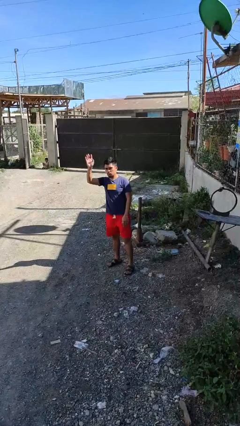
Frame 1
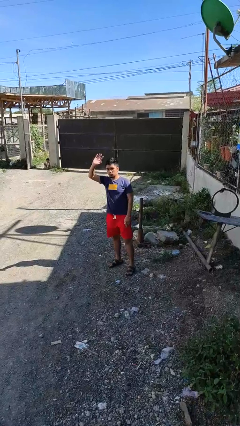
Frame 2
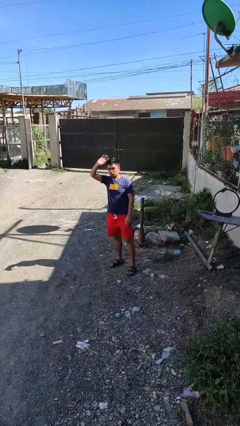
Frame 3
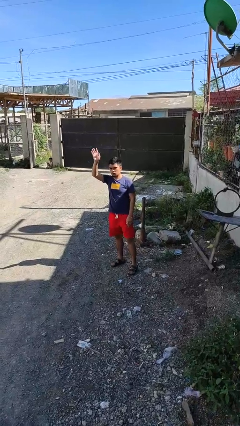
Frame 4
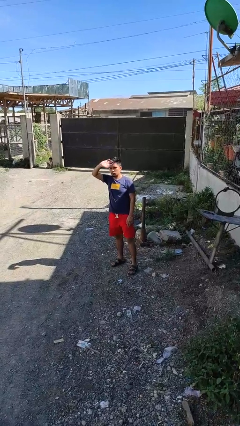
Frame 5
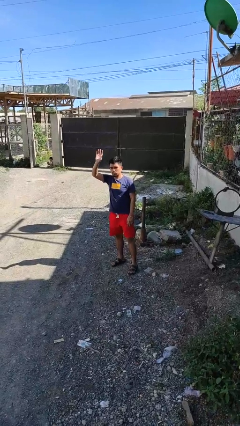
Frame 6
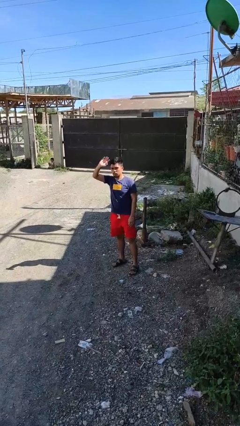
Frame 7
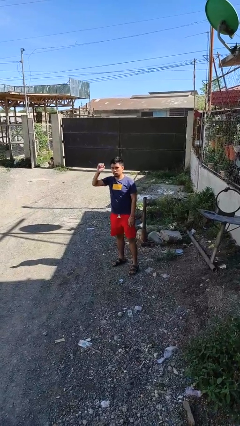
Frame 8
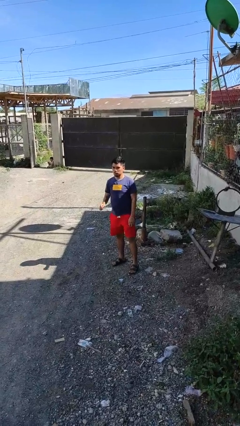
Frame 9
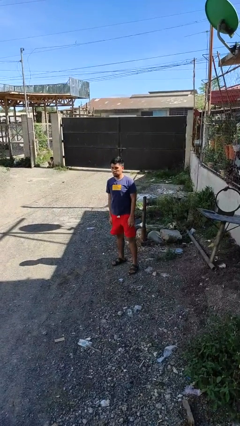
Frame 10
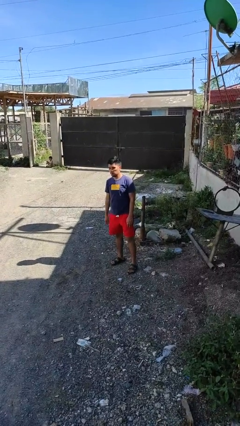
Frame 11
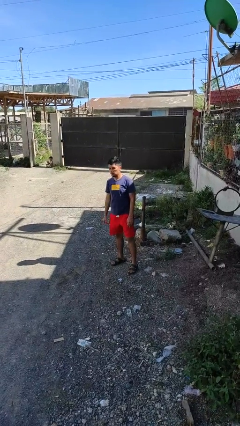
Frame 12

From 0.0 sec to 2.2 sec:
person waves at person

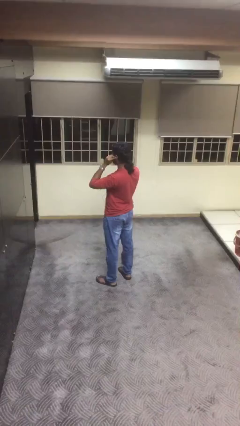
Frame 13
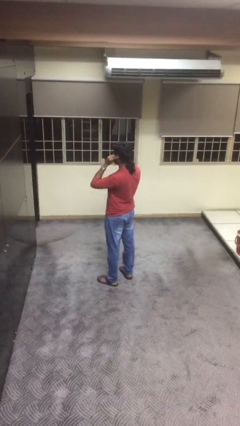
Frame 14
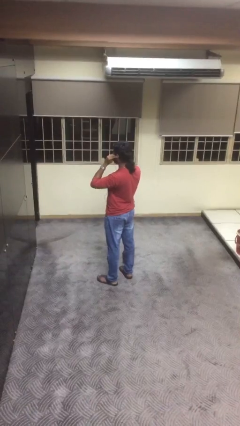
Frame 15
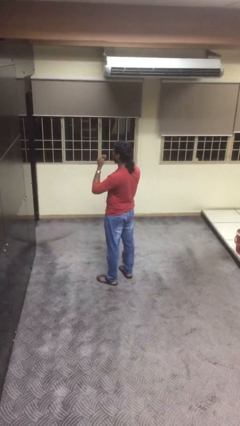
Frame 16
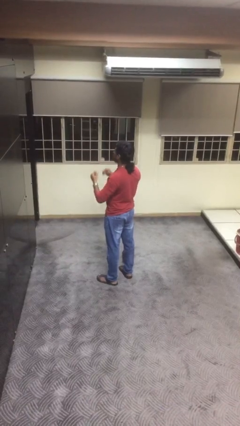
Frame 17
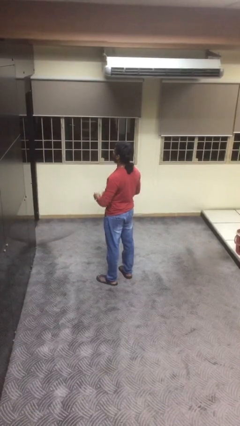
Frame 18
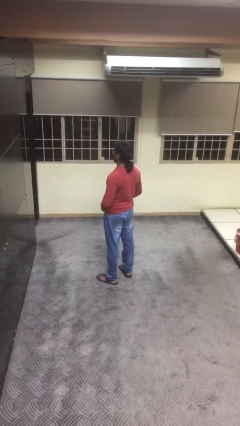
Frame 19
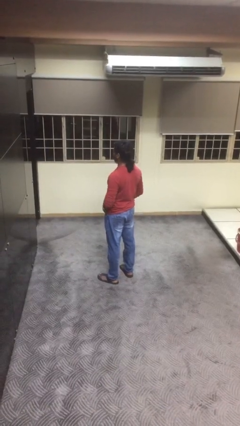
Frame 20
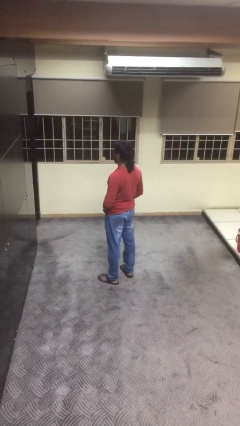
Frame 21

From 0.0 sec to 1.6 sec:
person takes off headphones

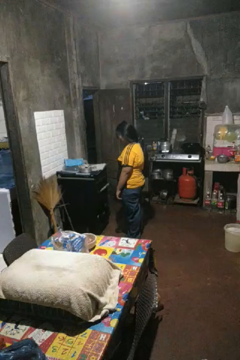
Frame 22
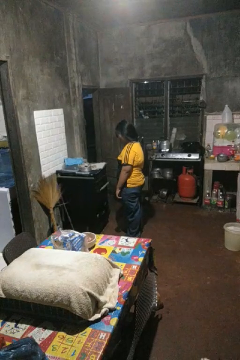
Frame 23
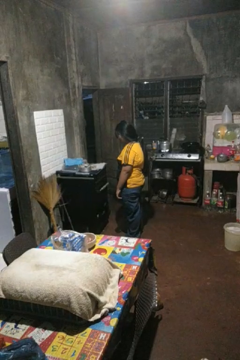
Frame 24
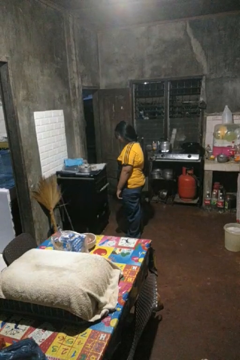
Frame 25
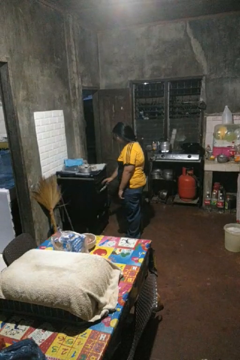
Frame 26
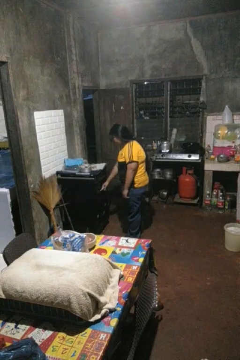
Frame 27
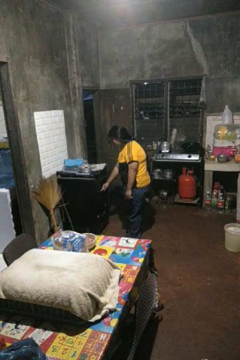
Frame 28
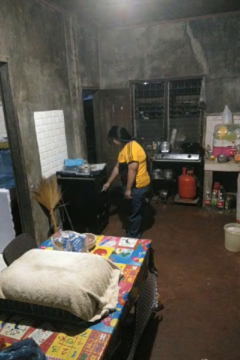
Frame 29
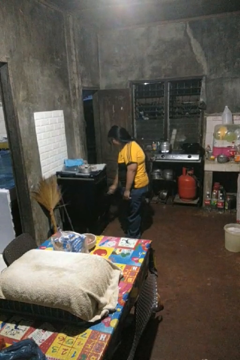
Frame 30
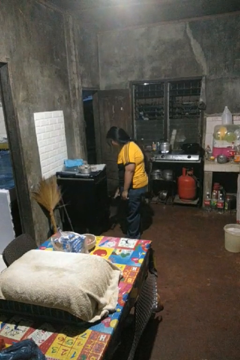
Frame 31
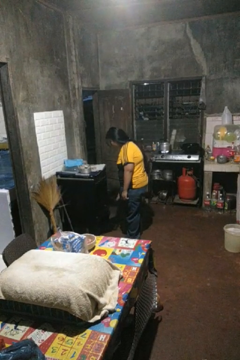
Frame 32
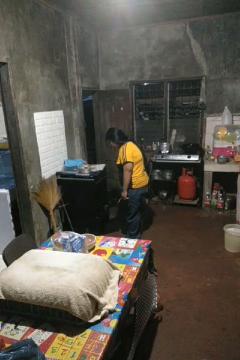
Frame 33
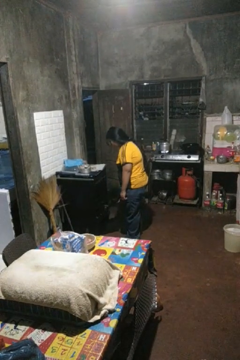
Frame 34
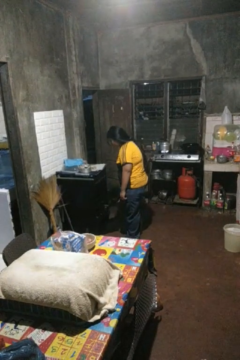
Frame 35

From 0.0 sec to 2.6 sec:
person opens oven door

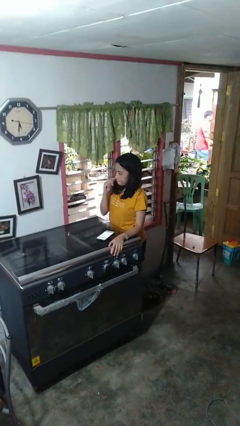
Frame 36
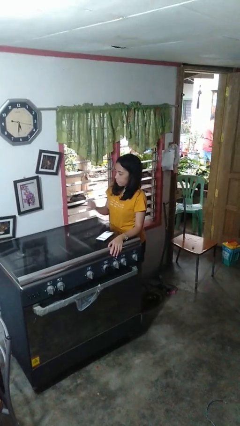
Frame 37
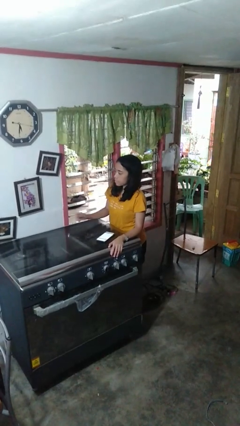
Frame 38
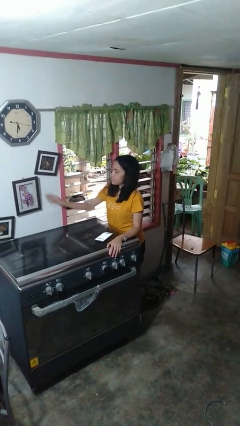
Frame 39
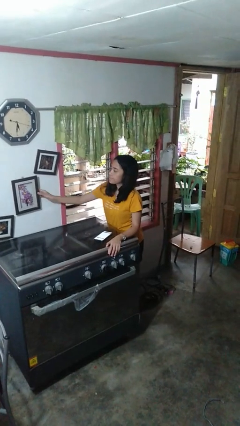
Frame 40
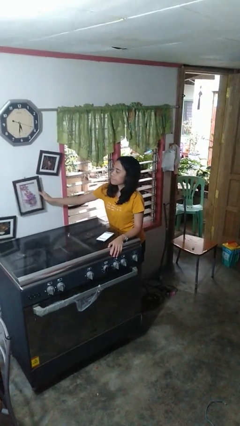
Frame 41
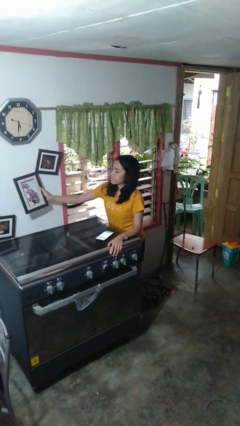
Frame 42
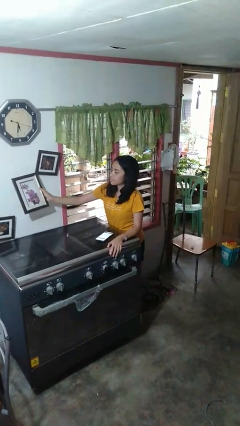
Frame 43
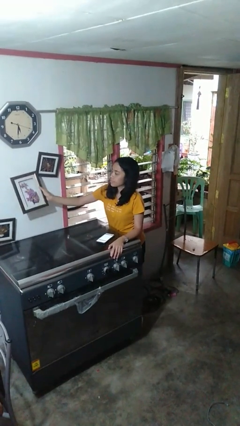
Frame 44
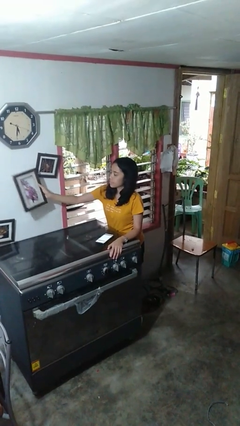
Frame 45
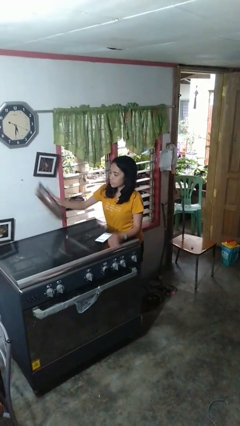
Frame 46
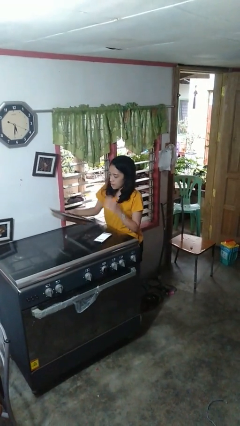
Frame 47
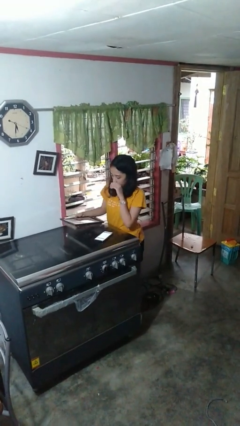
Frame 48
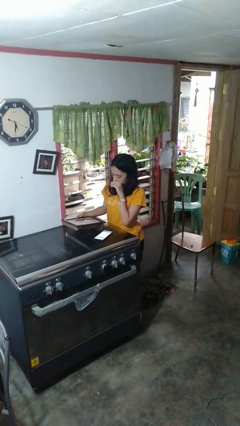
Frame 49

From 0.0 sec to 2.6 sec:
person takes down picture frame

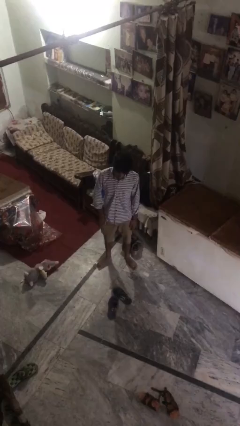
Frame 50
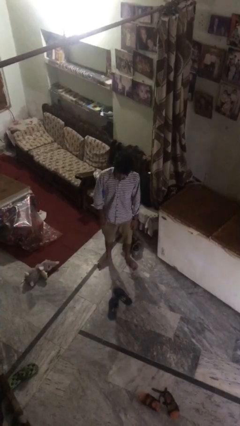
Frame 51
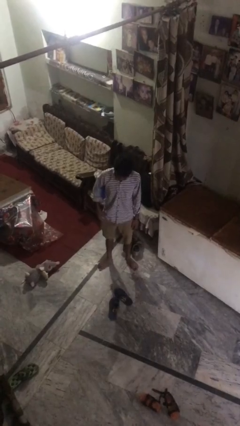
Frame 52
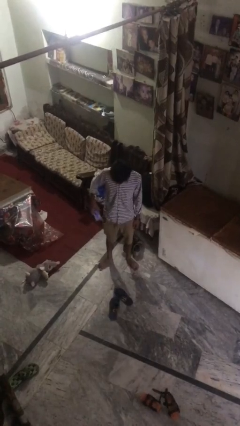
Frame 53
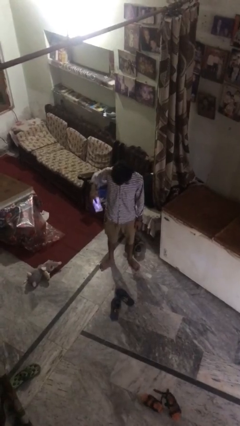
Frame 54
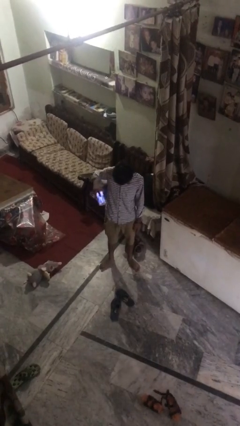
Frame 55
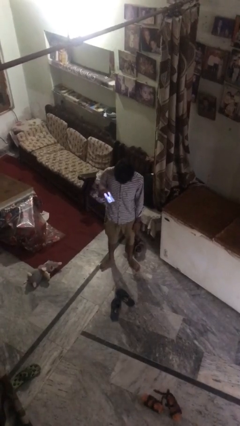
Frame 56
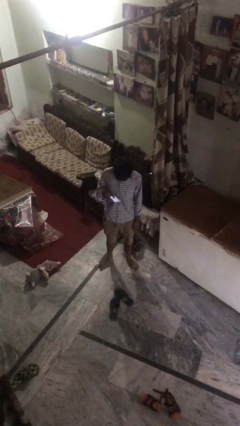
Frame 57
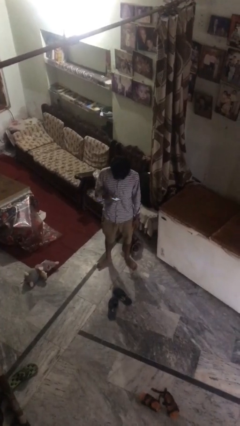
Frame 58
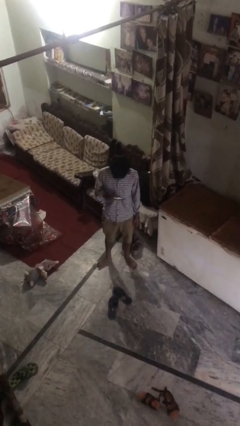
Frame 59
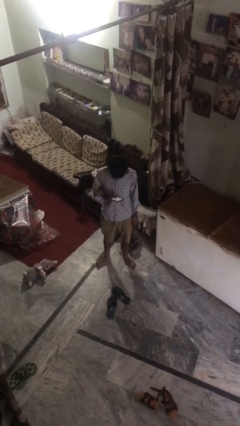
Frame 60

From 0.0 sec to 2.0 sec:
person takes phone from pocket

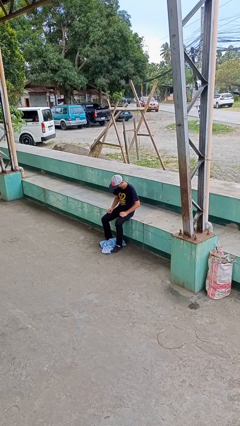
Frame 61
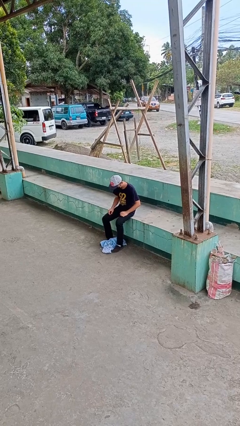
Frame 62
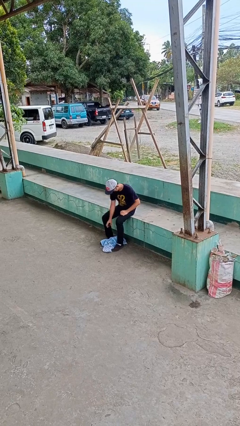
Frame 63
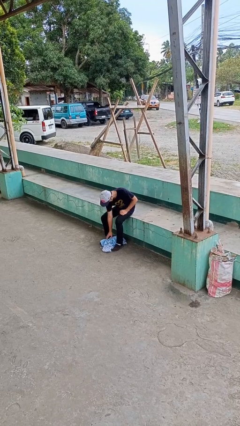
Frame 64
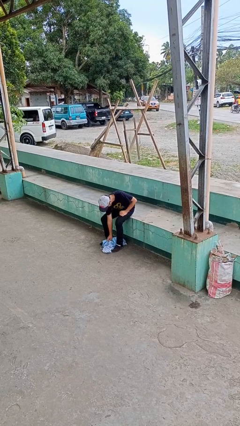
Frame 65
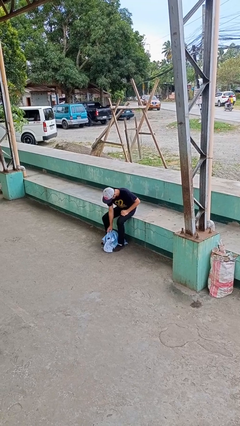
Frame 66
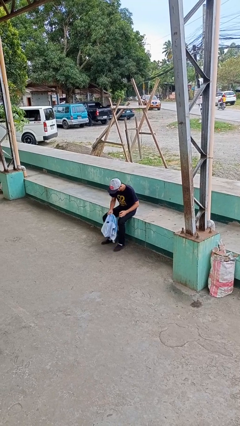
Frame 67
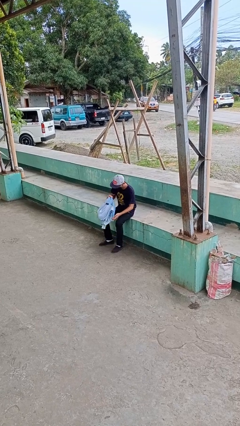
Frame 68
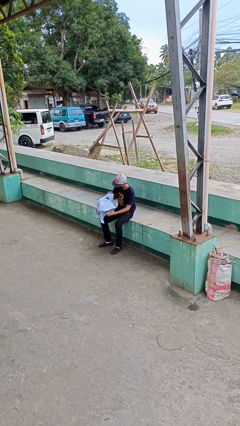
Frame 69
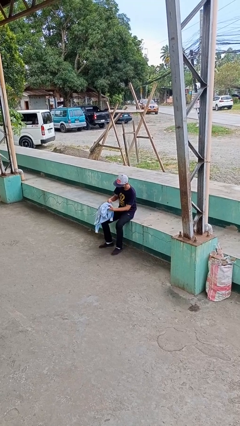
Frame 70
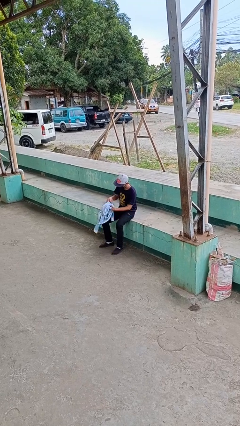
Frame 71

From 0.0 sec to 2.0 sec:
person picks up object from floor

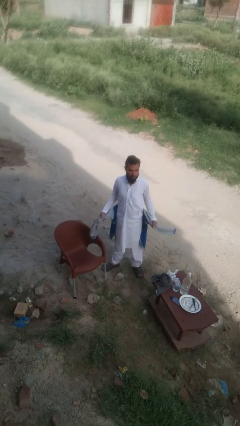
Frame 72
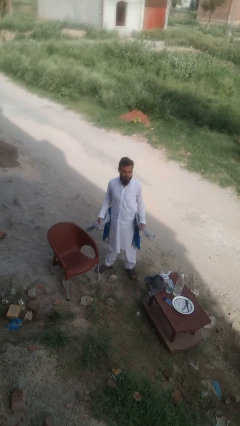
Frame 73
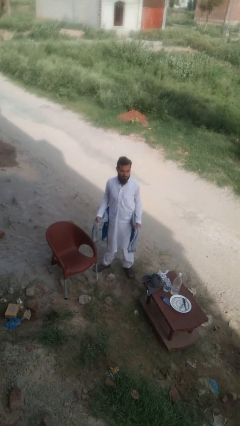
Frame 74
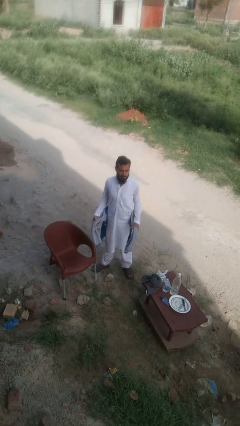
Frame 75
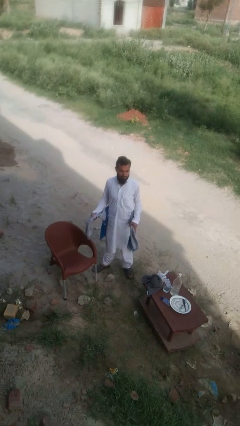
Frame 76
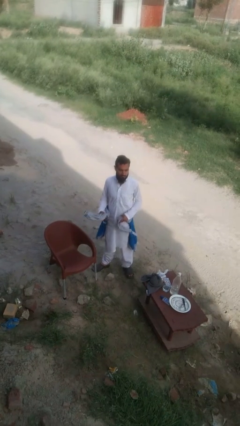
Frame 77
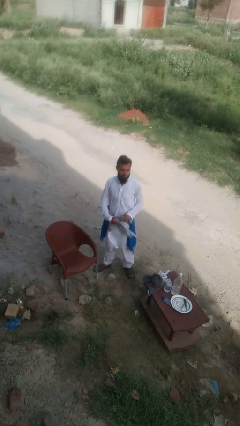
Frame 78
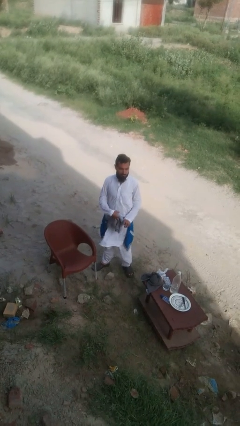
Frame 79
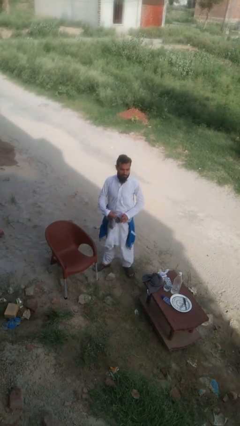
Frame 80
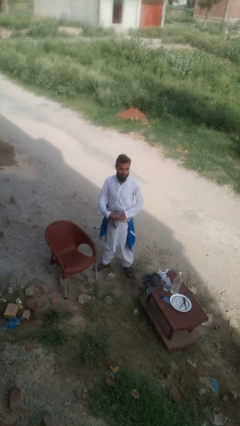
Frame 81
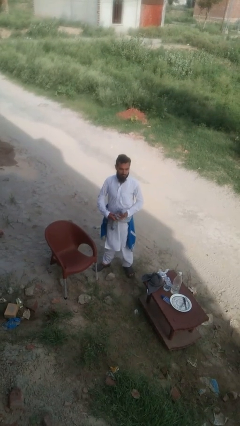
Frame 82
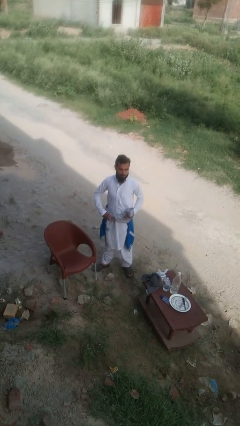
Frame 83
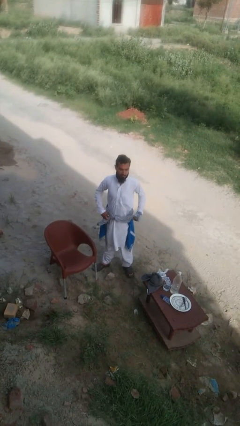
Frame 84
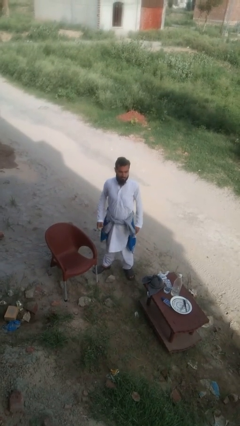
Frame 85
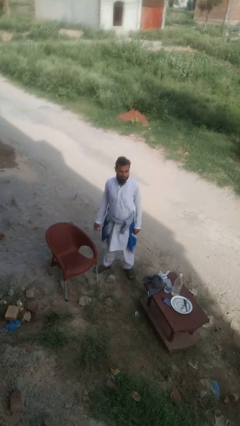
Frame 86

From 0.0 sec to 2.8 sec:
person ties jacket around waist

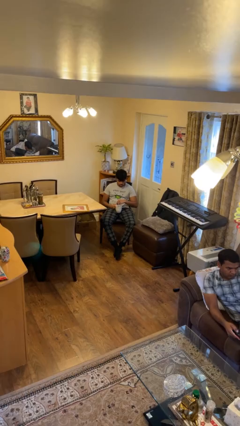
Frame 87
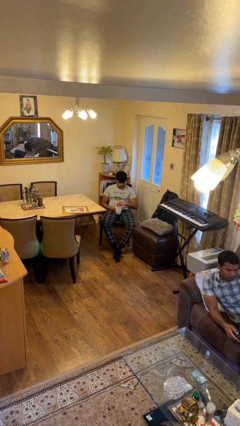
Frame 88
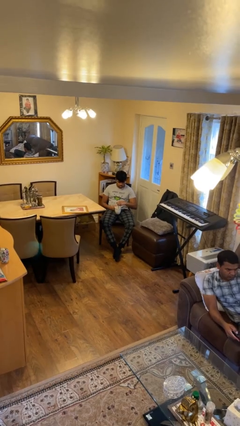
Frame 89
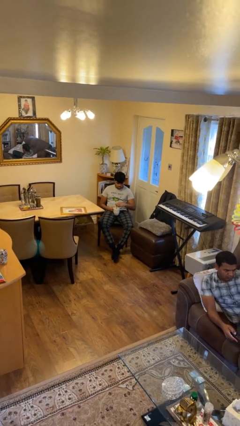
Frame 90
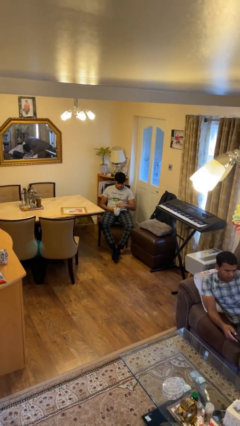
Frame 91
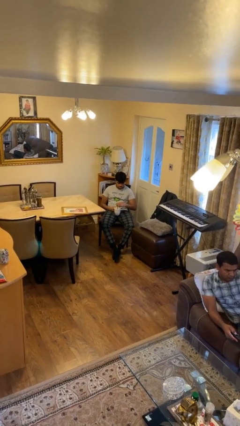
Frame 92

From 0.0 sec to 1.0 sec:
person stirs mug

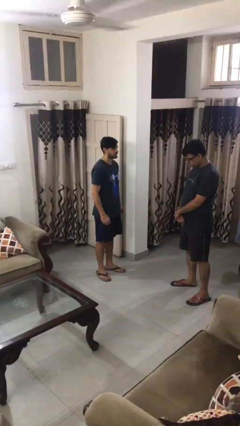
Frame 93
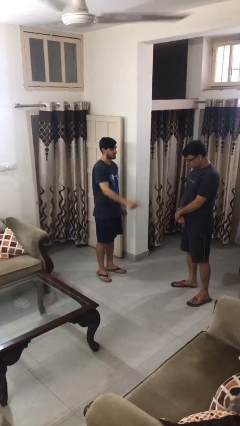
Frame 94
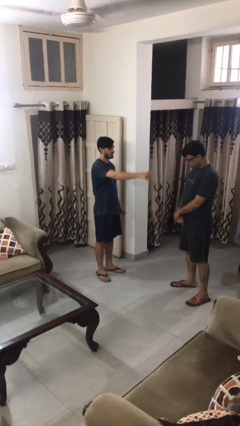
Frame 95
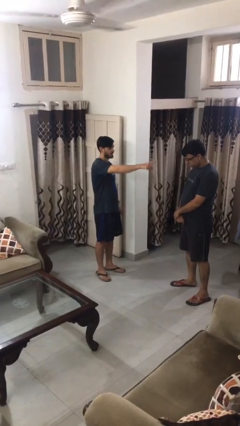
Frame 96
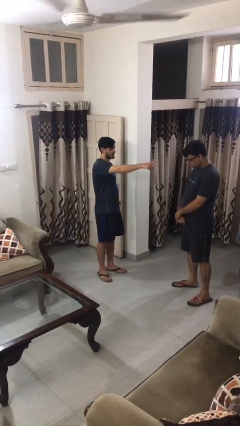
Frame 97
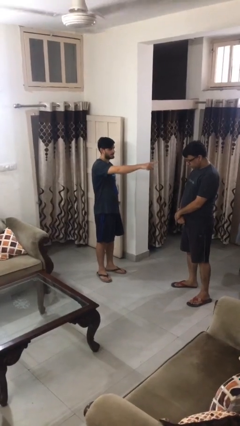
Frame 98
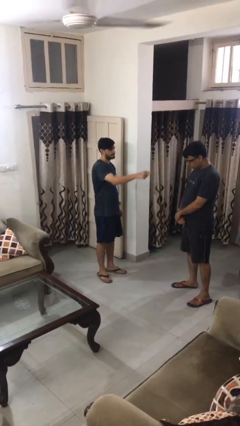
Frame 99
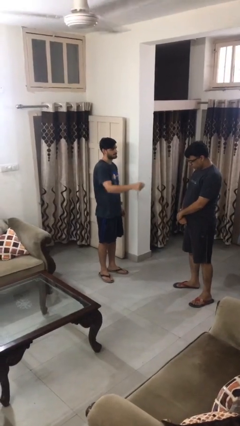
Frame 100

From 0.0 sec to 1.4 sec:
person points at person
